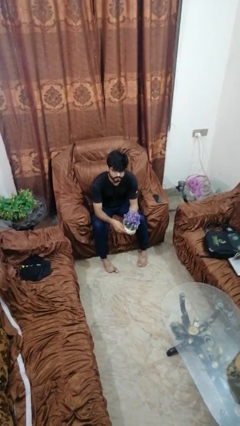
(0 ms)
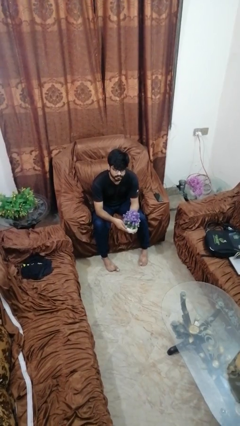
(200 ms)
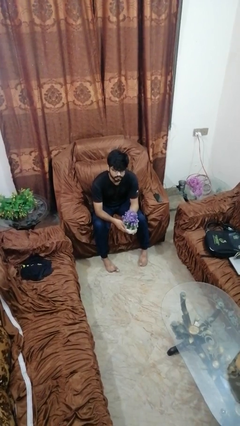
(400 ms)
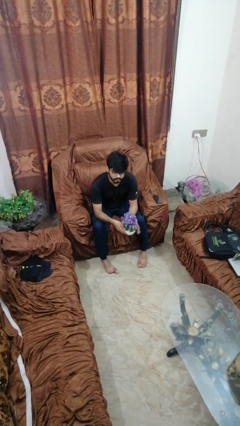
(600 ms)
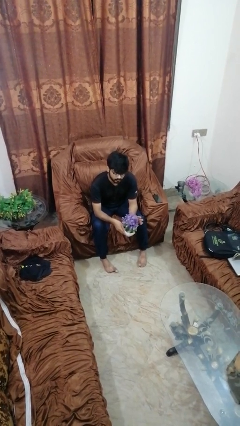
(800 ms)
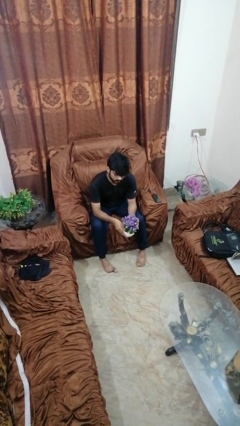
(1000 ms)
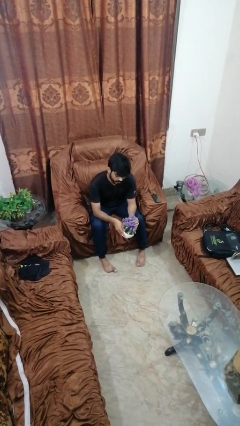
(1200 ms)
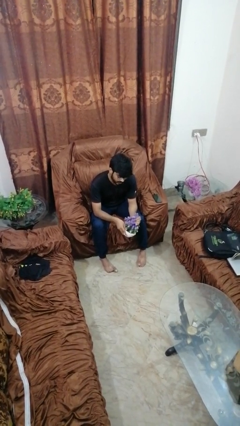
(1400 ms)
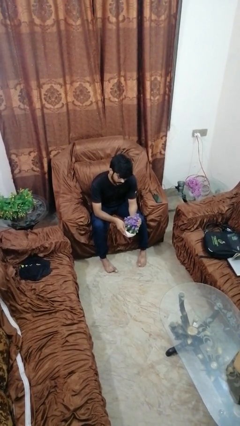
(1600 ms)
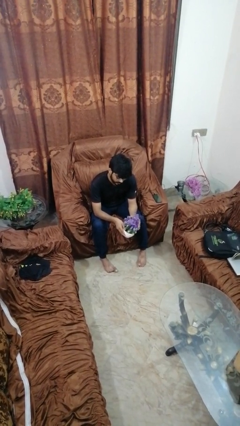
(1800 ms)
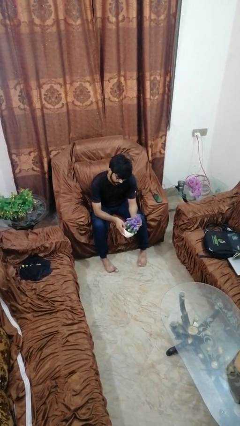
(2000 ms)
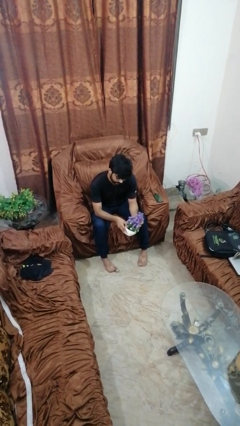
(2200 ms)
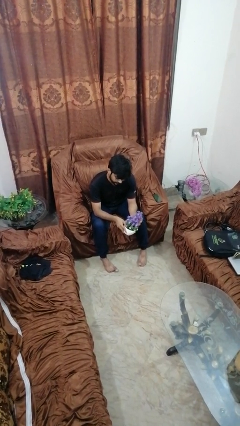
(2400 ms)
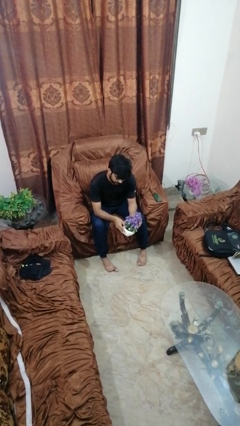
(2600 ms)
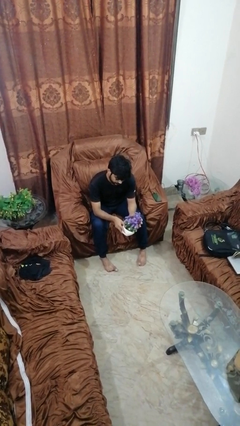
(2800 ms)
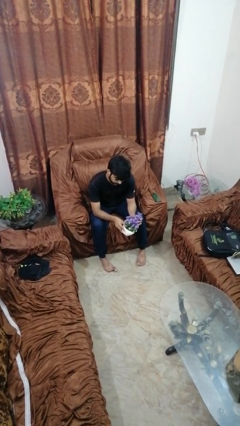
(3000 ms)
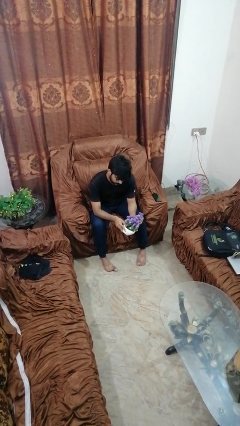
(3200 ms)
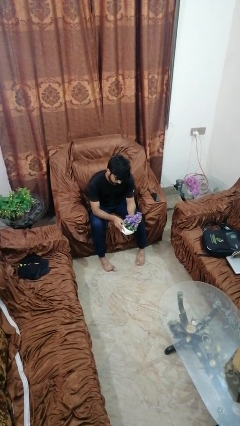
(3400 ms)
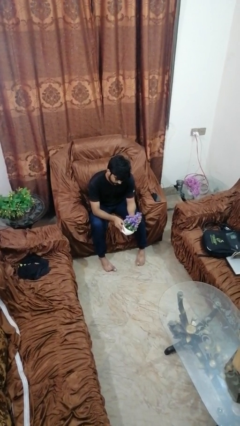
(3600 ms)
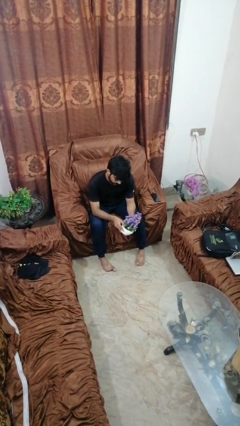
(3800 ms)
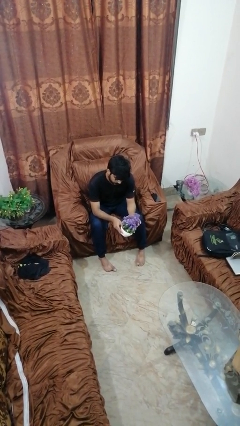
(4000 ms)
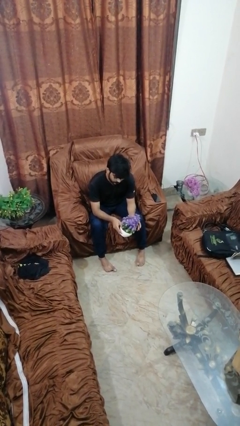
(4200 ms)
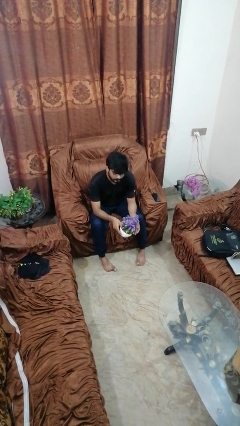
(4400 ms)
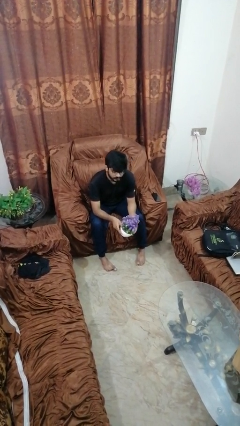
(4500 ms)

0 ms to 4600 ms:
person squeezes object

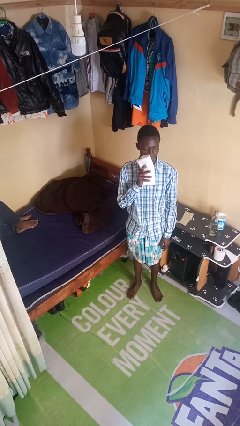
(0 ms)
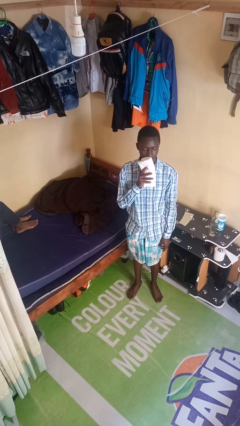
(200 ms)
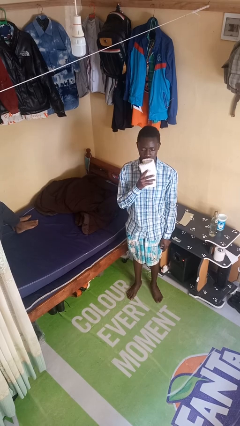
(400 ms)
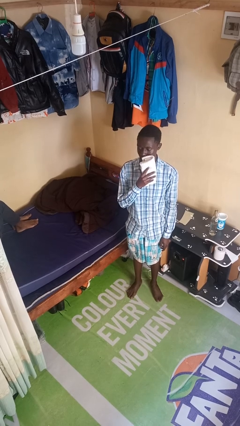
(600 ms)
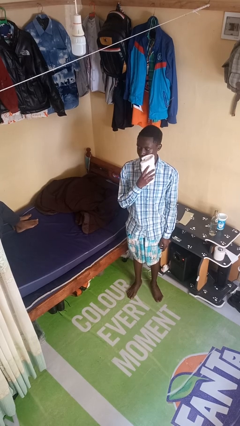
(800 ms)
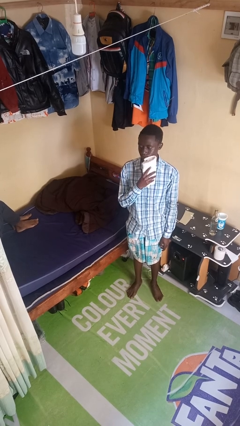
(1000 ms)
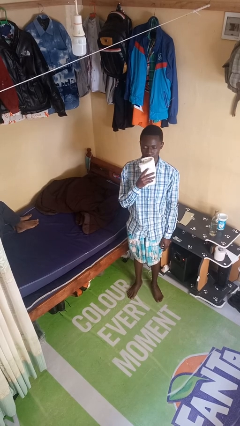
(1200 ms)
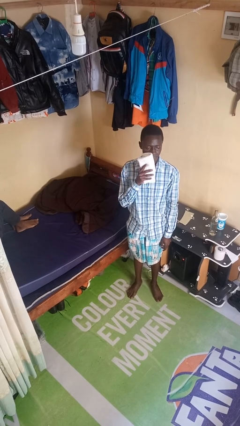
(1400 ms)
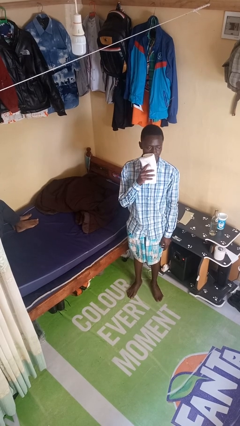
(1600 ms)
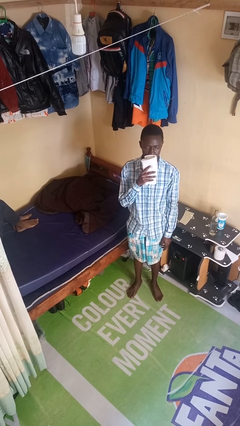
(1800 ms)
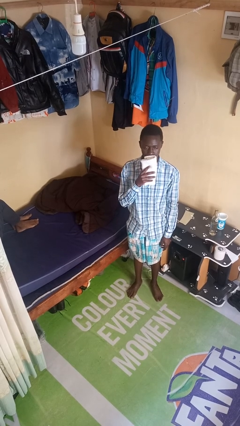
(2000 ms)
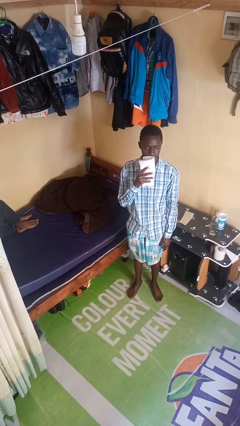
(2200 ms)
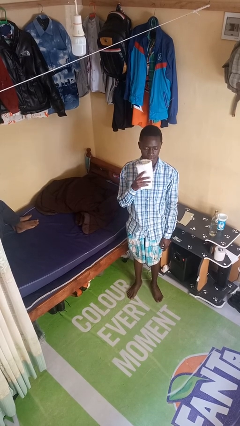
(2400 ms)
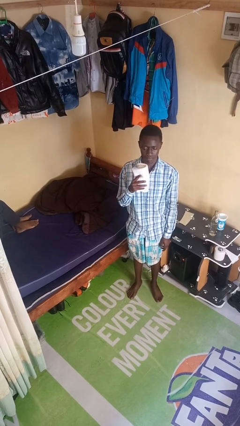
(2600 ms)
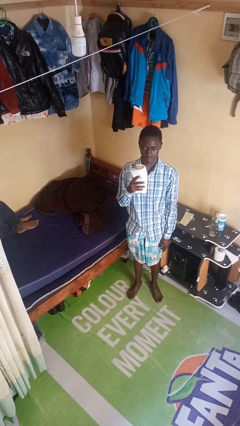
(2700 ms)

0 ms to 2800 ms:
person wipes mouth with napkin

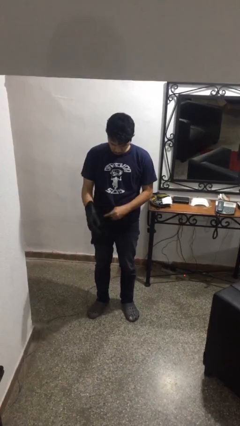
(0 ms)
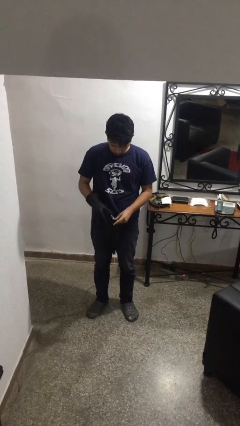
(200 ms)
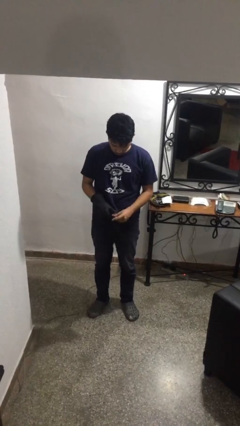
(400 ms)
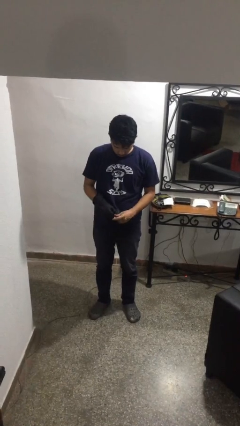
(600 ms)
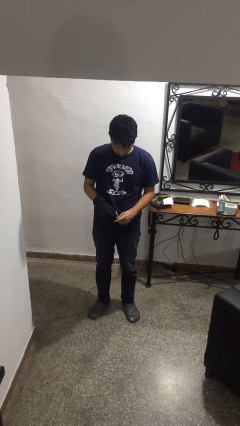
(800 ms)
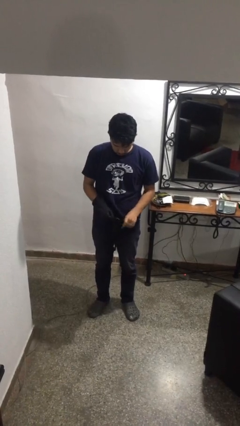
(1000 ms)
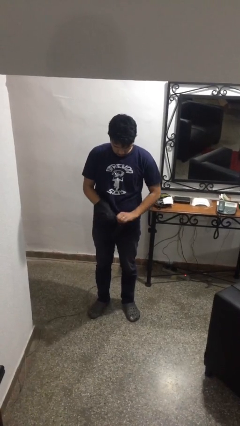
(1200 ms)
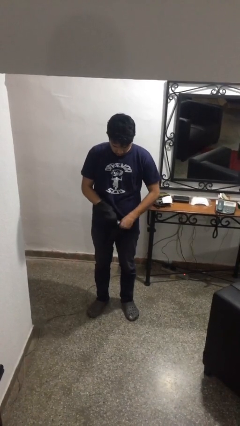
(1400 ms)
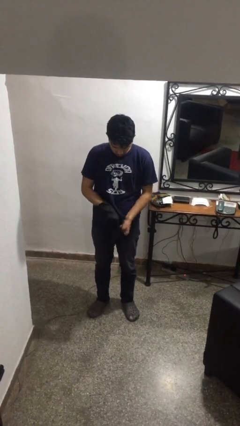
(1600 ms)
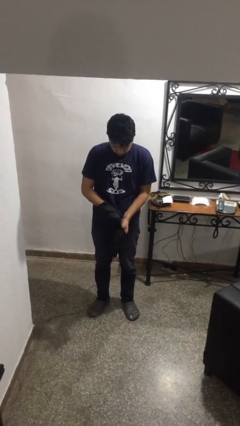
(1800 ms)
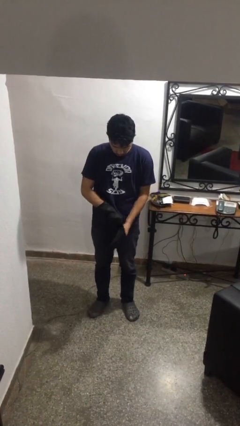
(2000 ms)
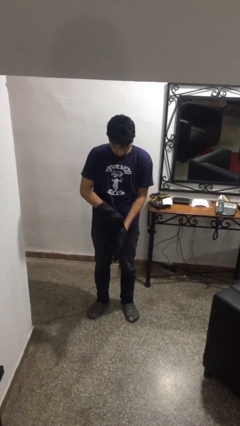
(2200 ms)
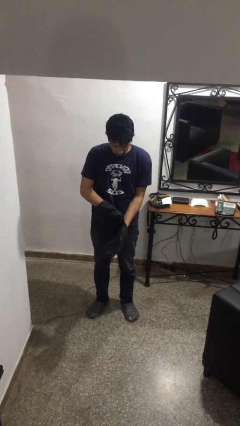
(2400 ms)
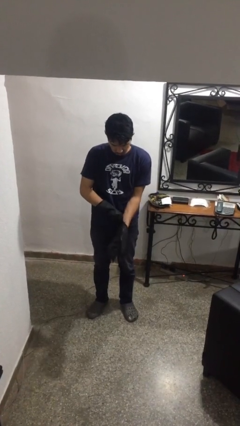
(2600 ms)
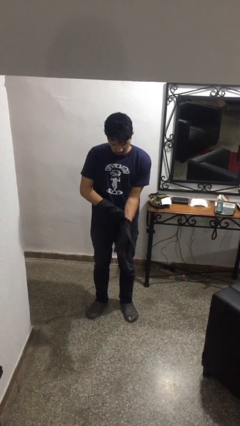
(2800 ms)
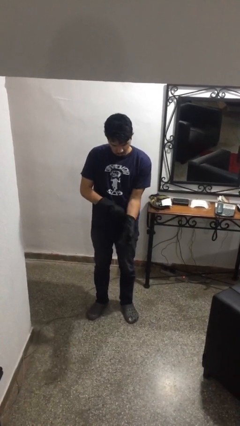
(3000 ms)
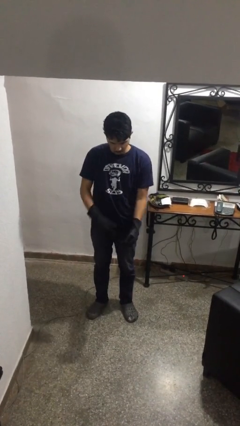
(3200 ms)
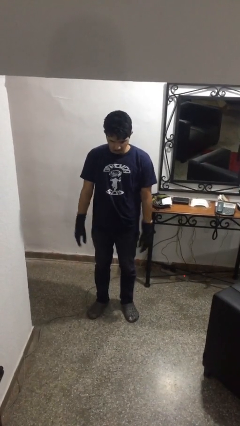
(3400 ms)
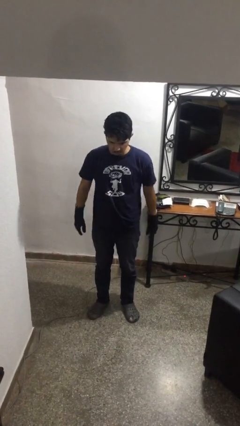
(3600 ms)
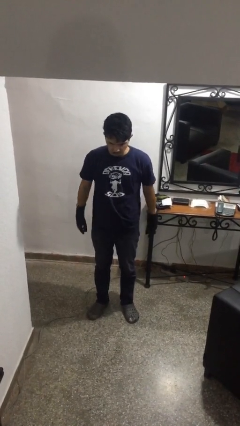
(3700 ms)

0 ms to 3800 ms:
person puts on gloves

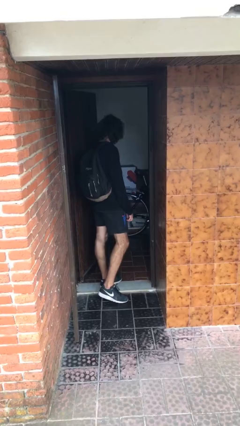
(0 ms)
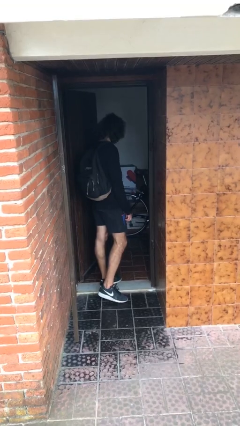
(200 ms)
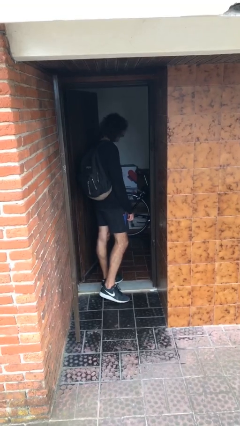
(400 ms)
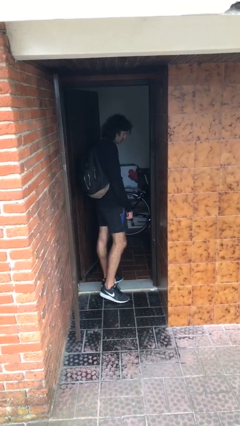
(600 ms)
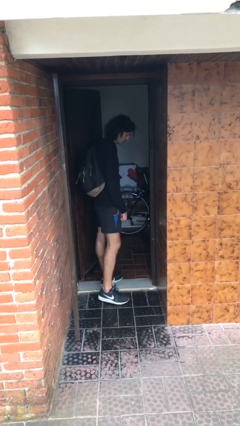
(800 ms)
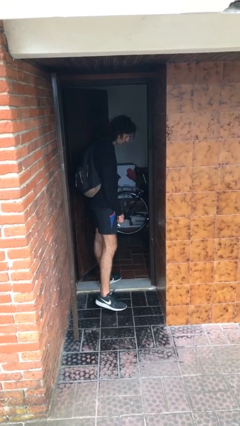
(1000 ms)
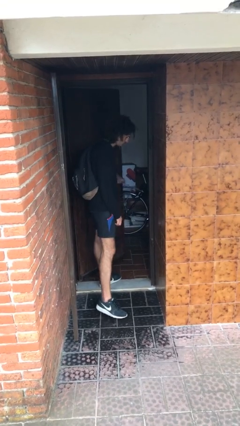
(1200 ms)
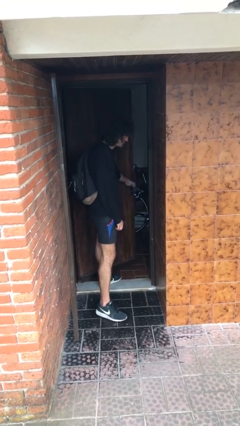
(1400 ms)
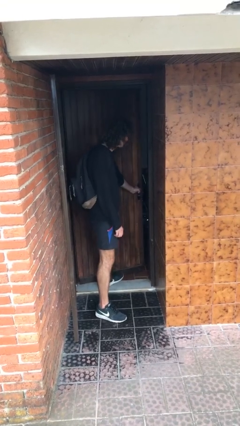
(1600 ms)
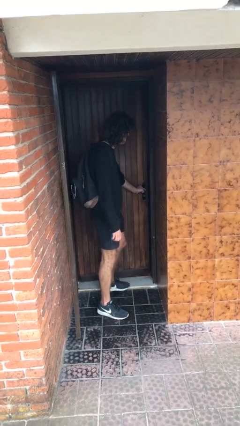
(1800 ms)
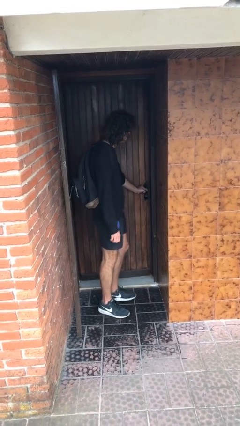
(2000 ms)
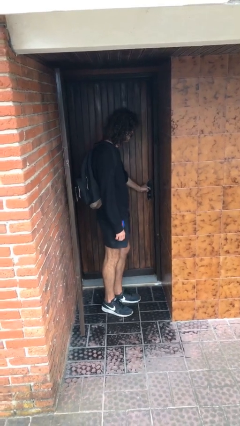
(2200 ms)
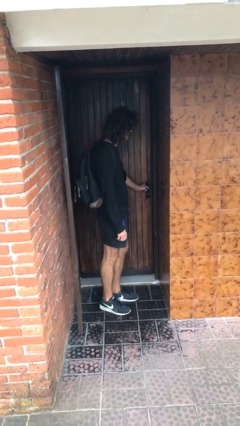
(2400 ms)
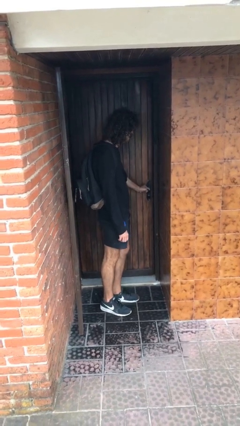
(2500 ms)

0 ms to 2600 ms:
person closes facility door

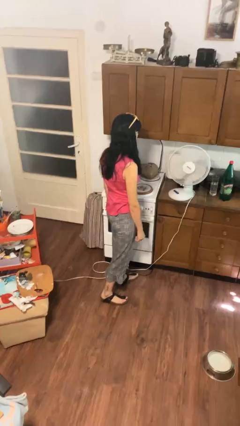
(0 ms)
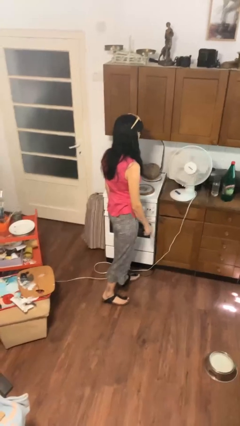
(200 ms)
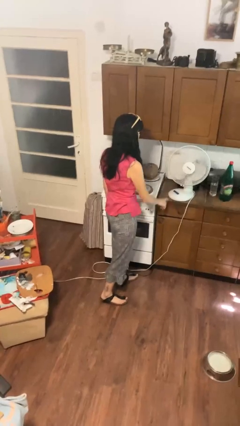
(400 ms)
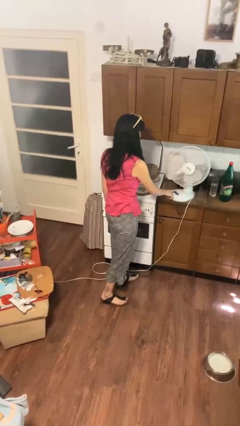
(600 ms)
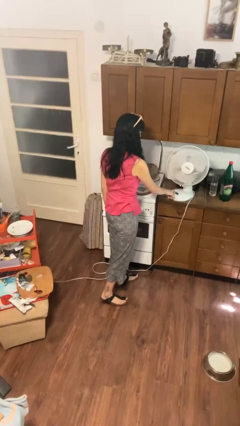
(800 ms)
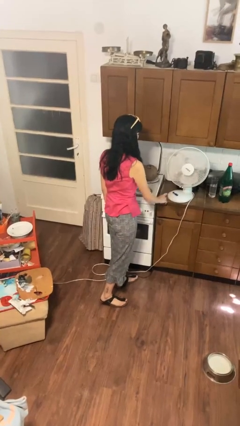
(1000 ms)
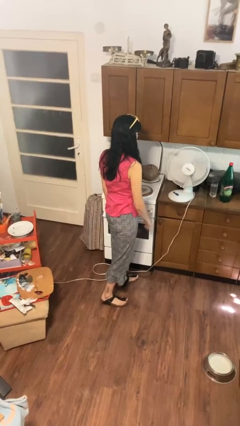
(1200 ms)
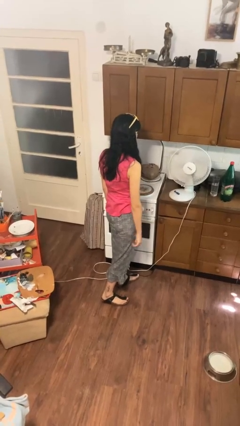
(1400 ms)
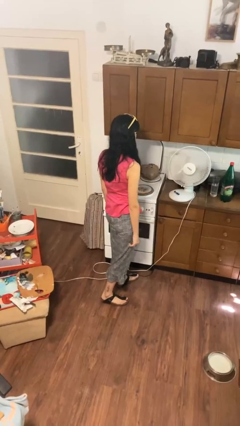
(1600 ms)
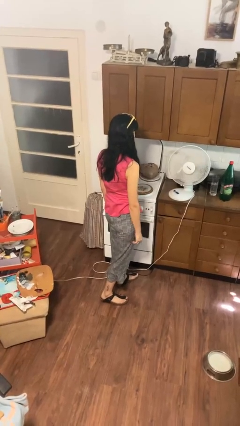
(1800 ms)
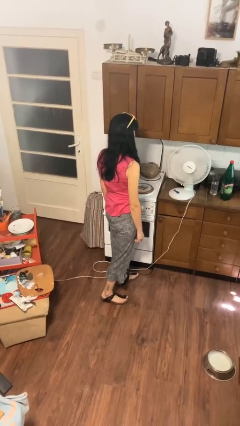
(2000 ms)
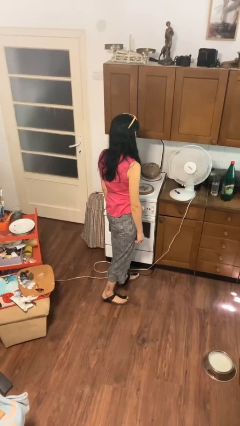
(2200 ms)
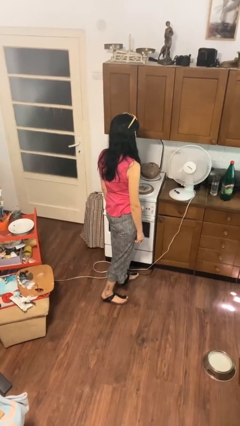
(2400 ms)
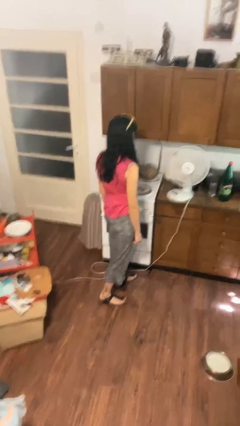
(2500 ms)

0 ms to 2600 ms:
person turns on fan
